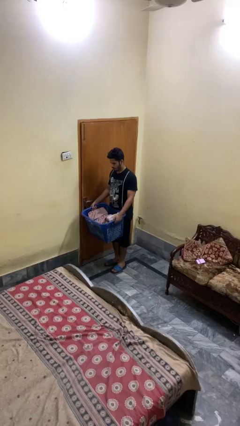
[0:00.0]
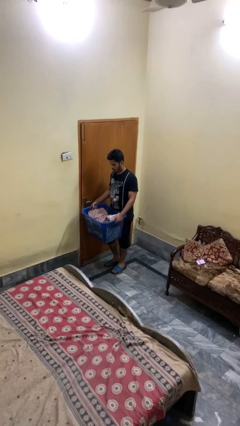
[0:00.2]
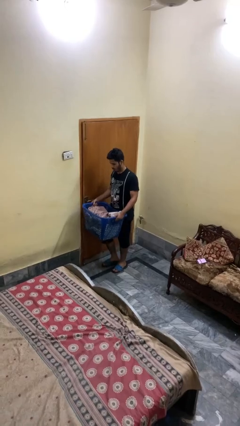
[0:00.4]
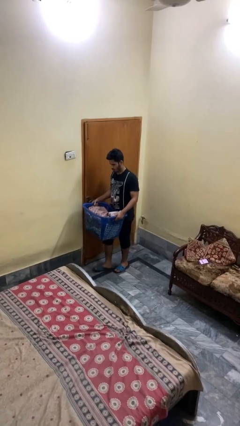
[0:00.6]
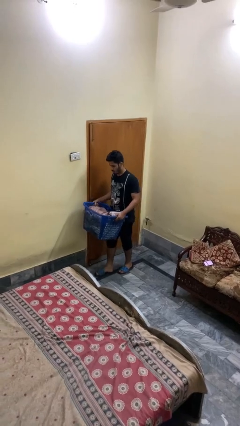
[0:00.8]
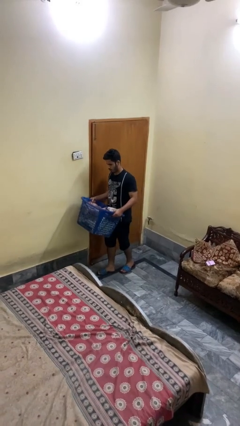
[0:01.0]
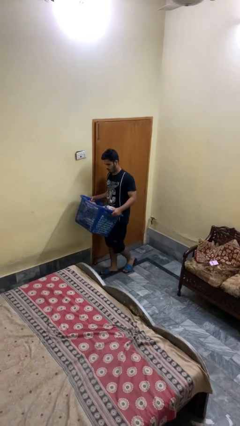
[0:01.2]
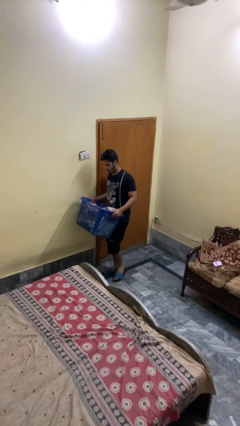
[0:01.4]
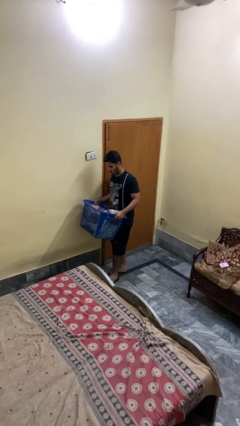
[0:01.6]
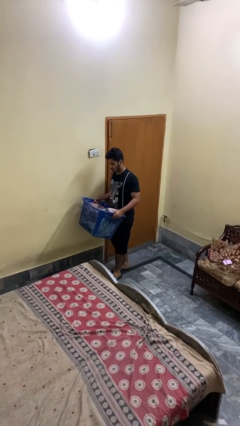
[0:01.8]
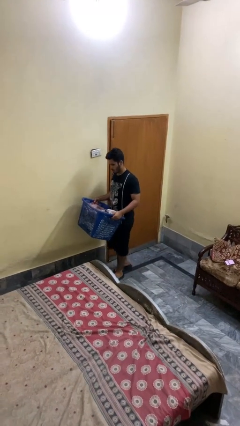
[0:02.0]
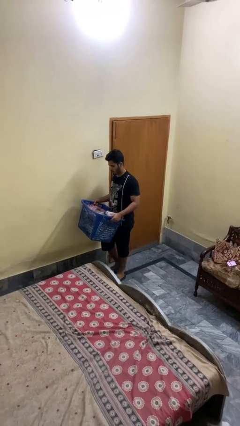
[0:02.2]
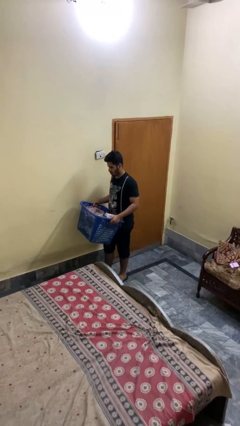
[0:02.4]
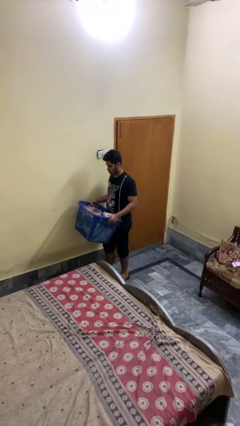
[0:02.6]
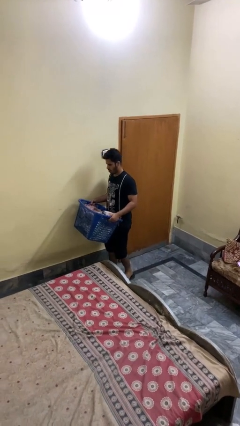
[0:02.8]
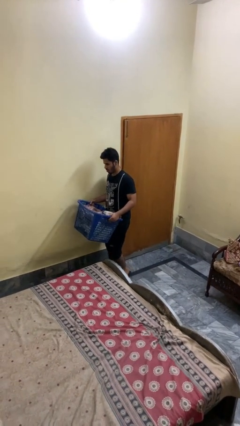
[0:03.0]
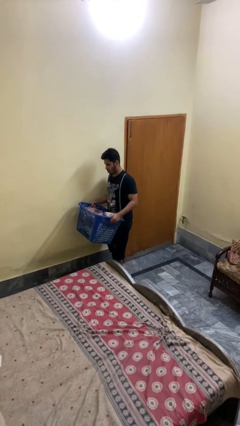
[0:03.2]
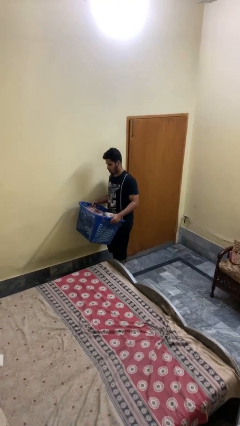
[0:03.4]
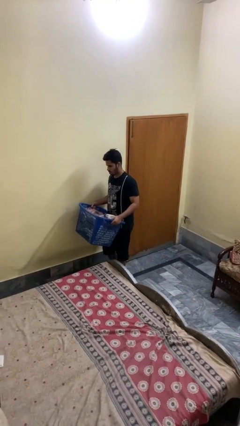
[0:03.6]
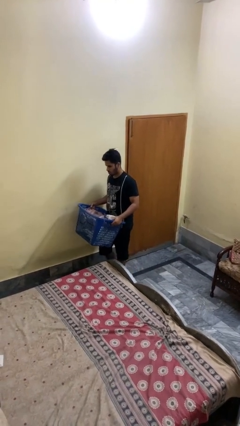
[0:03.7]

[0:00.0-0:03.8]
person carries laundry basket

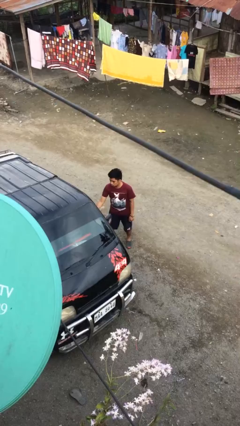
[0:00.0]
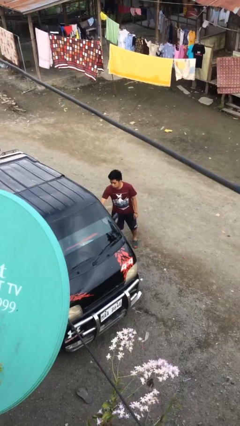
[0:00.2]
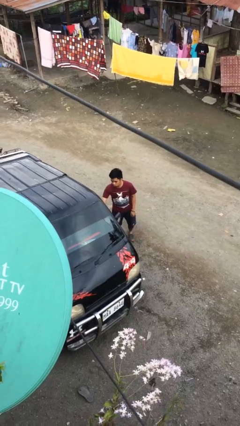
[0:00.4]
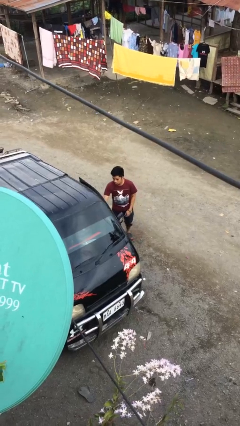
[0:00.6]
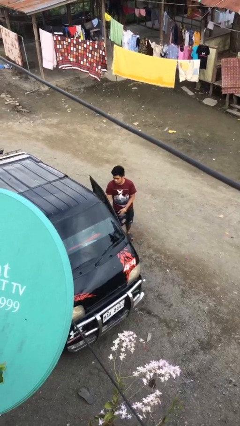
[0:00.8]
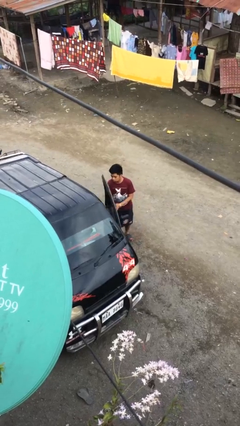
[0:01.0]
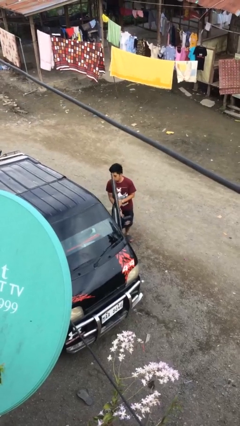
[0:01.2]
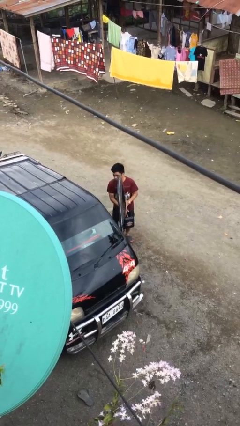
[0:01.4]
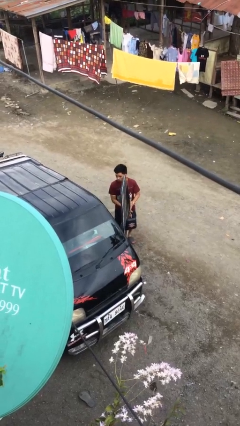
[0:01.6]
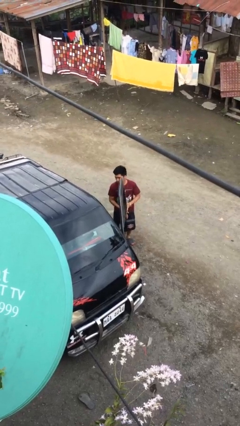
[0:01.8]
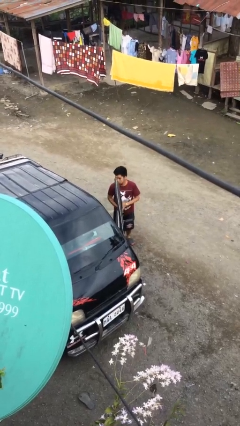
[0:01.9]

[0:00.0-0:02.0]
person opens car door

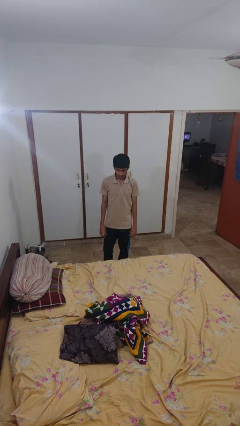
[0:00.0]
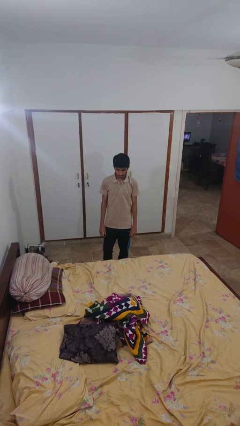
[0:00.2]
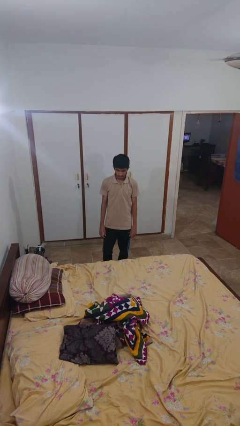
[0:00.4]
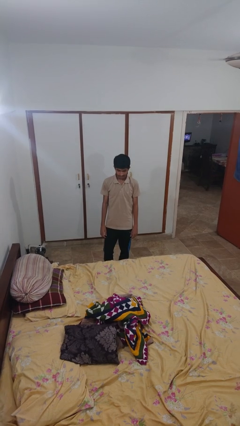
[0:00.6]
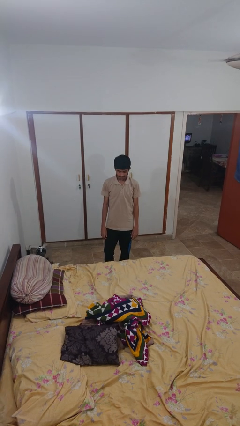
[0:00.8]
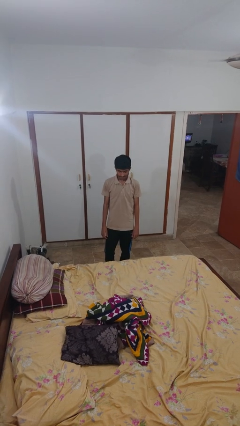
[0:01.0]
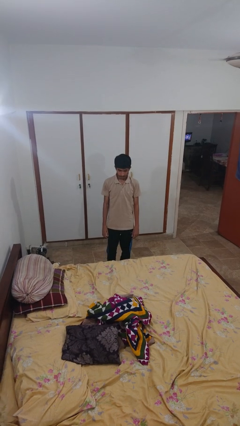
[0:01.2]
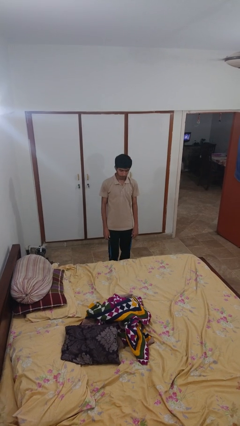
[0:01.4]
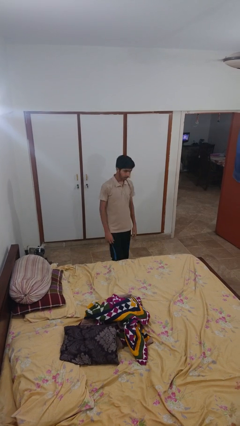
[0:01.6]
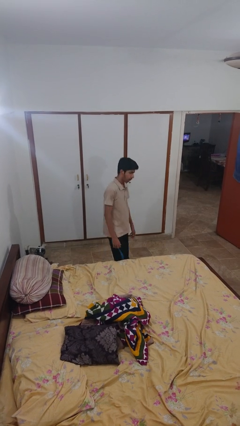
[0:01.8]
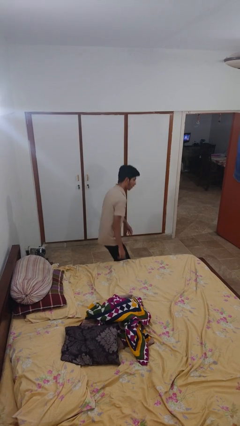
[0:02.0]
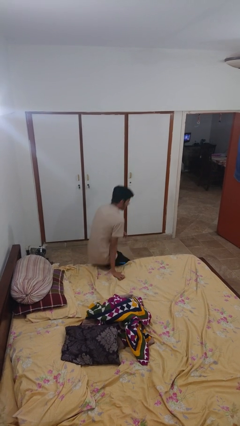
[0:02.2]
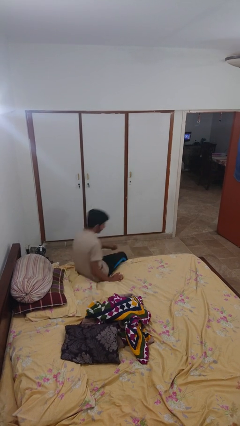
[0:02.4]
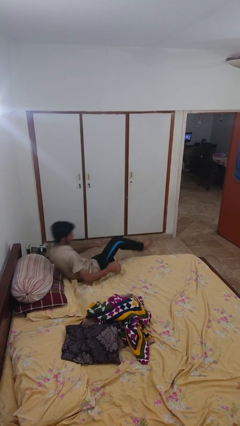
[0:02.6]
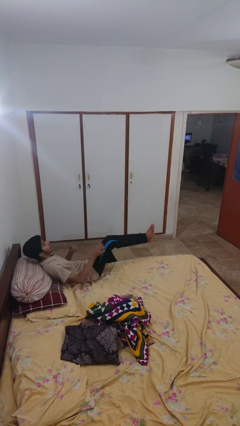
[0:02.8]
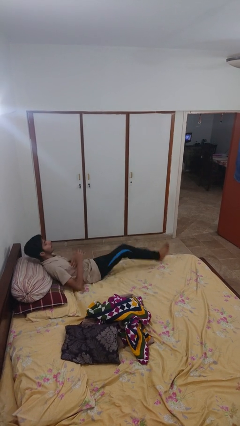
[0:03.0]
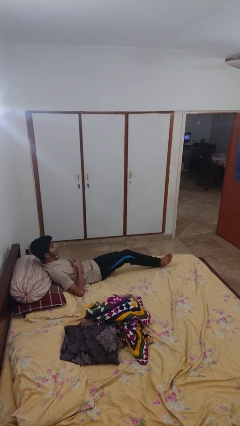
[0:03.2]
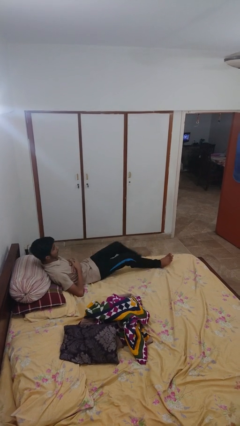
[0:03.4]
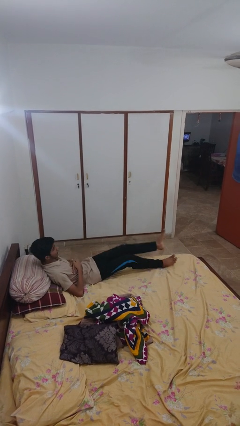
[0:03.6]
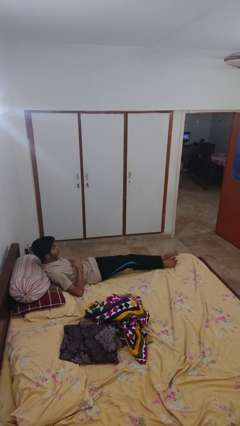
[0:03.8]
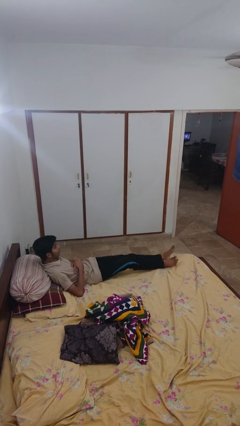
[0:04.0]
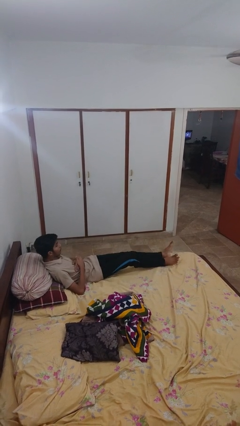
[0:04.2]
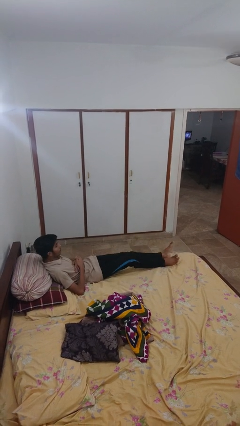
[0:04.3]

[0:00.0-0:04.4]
person lies down on bed

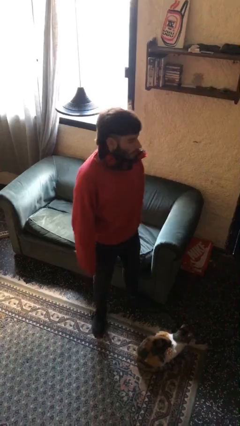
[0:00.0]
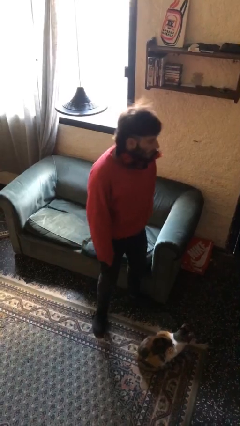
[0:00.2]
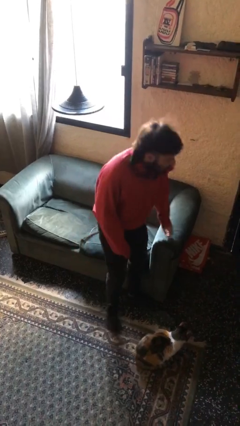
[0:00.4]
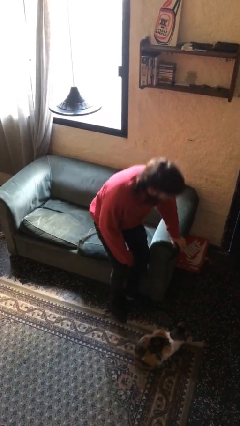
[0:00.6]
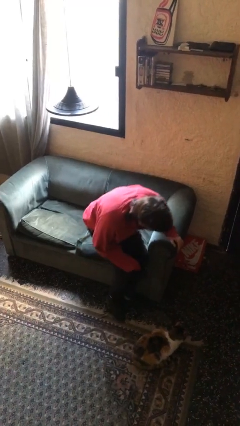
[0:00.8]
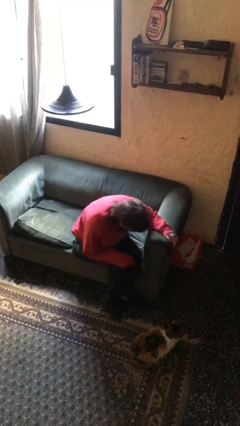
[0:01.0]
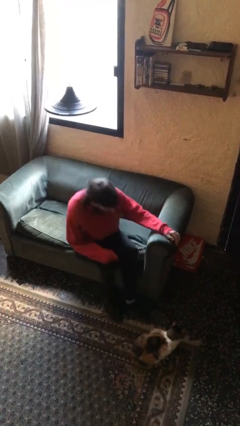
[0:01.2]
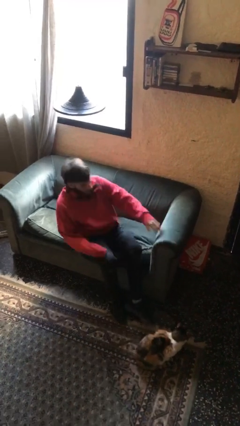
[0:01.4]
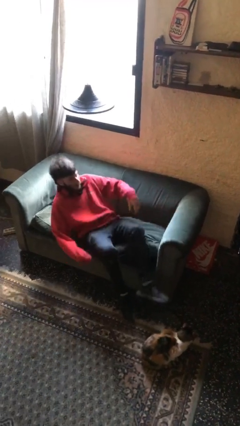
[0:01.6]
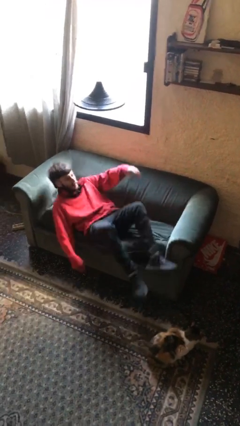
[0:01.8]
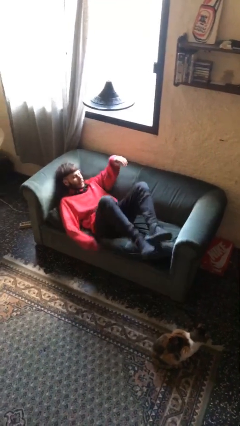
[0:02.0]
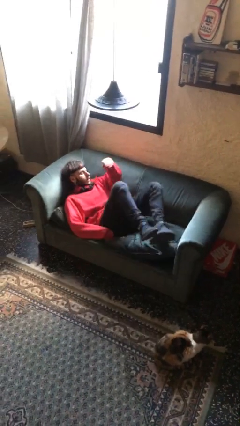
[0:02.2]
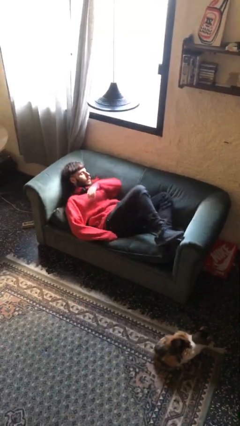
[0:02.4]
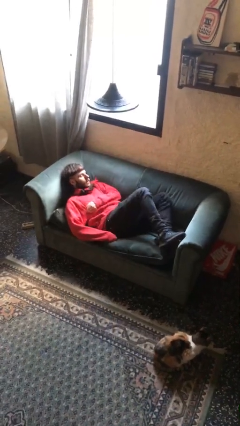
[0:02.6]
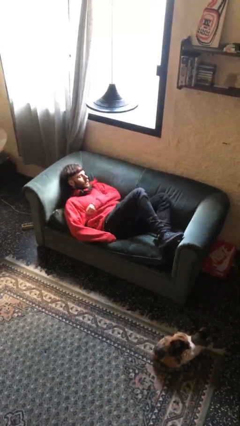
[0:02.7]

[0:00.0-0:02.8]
person lies down on couch

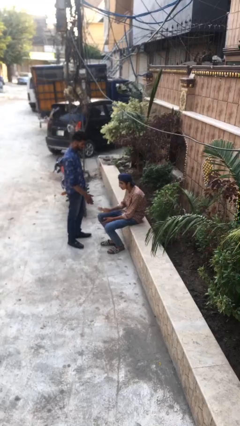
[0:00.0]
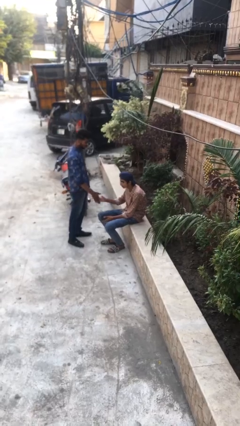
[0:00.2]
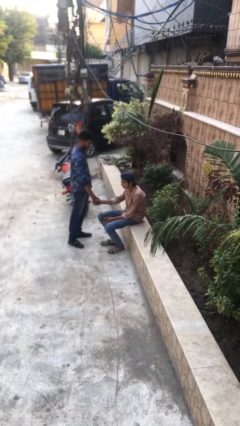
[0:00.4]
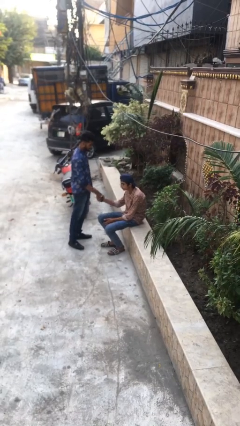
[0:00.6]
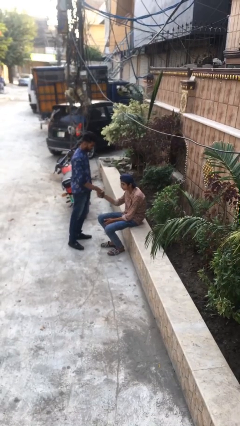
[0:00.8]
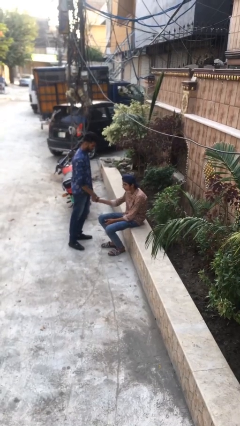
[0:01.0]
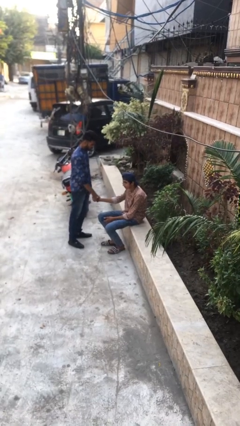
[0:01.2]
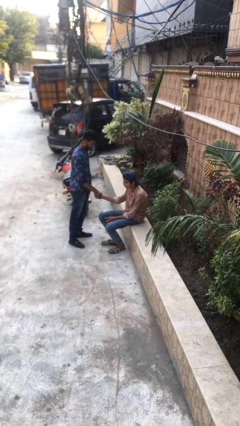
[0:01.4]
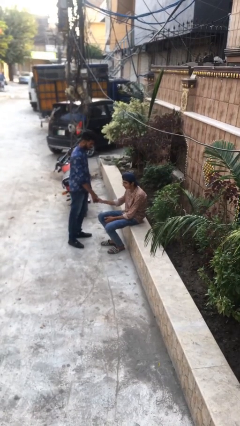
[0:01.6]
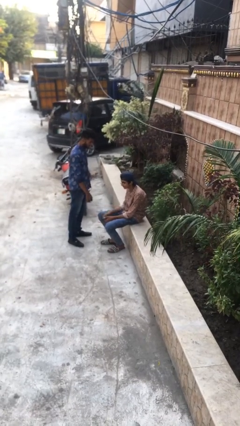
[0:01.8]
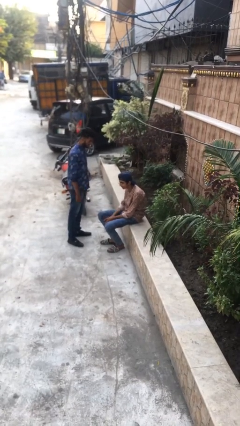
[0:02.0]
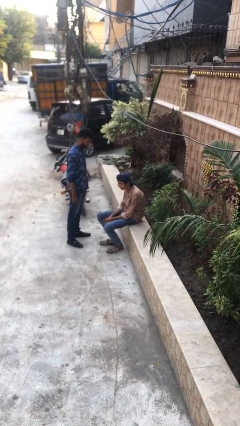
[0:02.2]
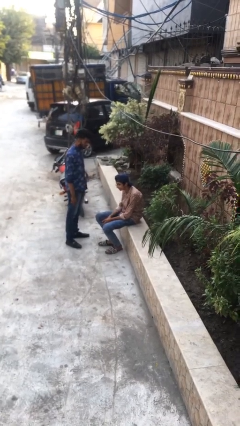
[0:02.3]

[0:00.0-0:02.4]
person shakes hand

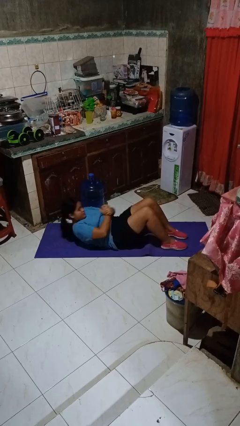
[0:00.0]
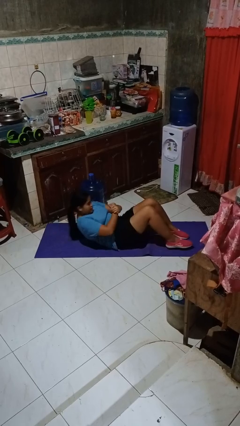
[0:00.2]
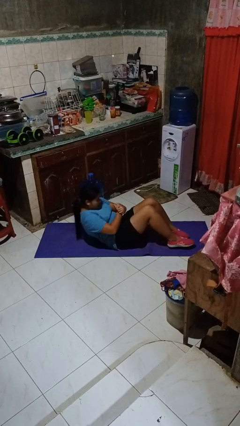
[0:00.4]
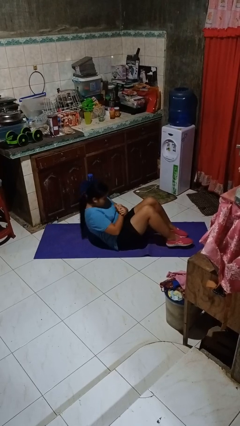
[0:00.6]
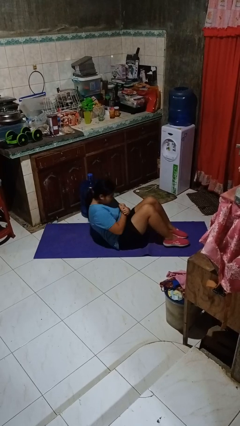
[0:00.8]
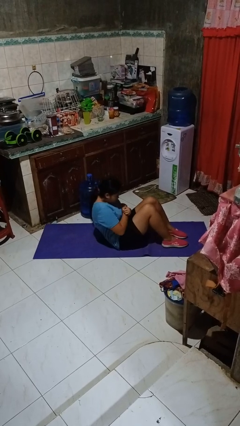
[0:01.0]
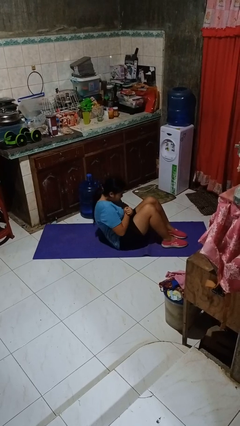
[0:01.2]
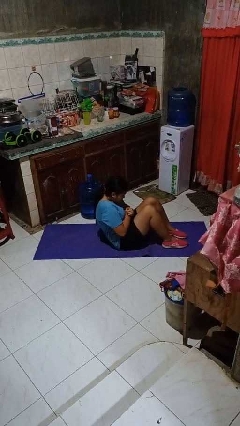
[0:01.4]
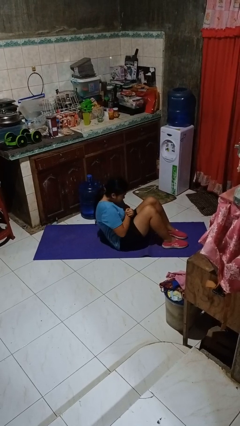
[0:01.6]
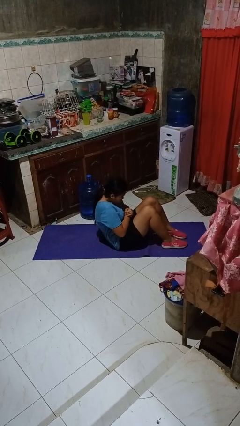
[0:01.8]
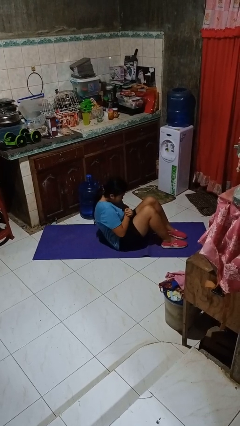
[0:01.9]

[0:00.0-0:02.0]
person exercises with situp
